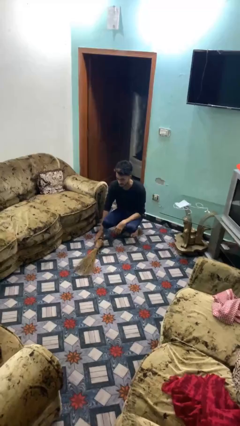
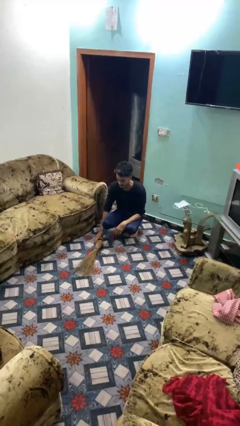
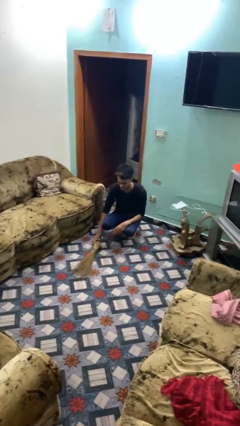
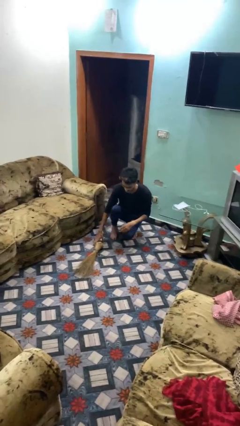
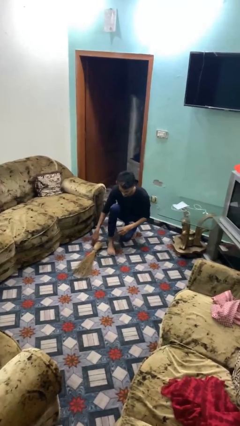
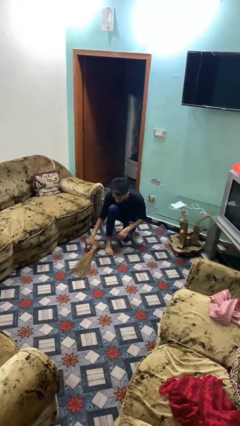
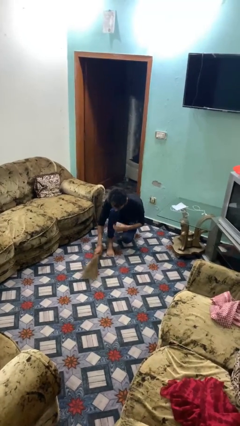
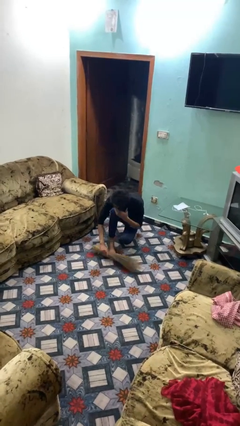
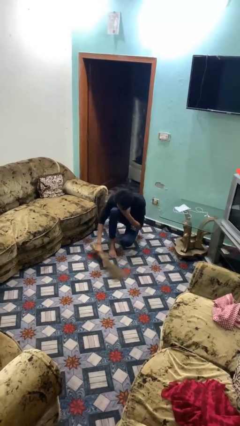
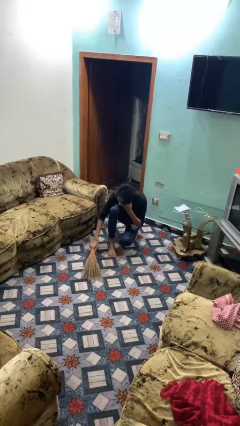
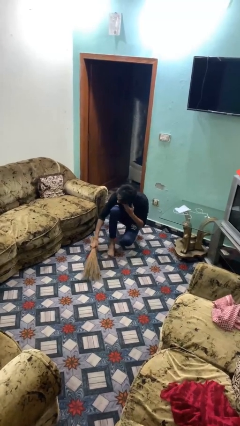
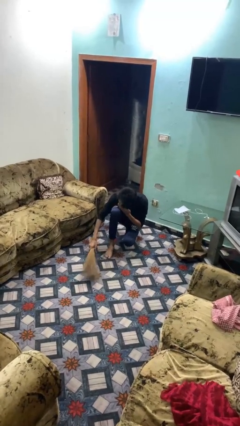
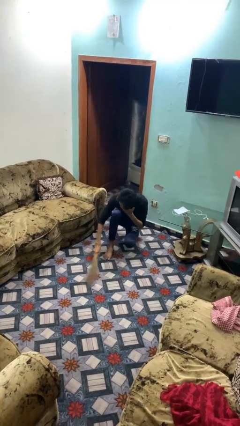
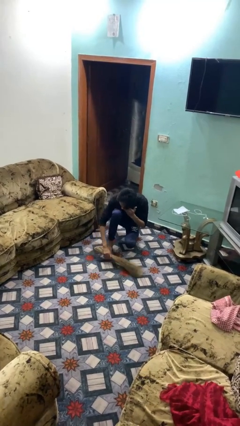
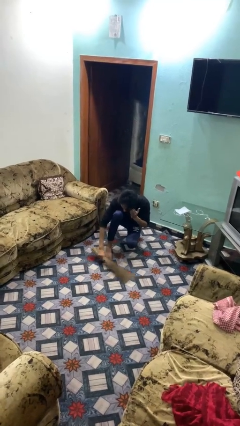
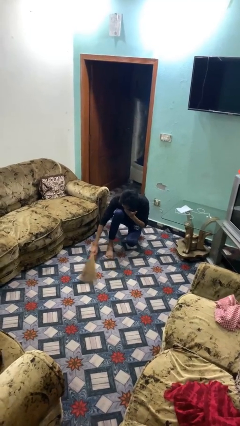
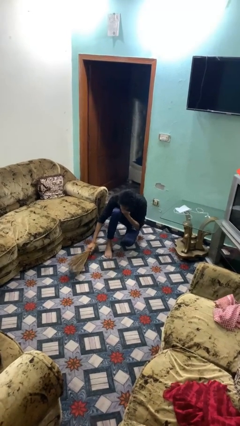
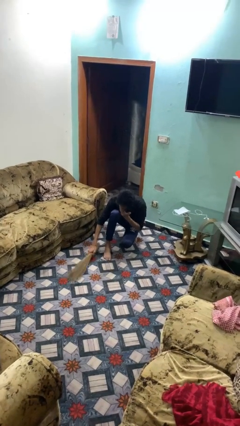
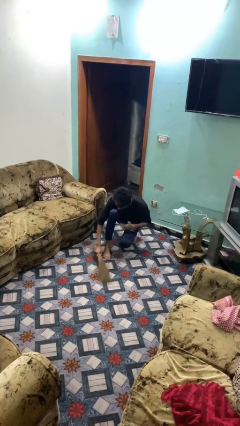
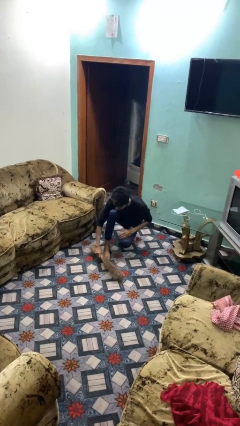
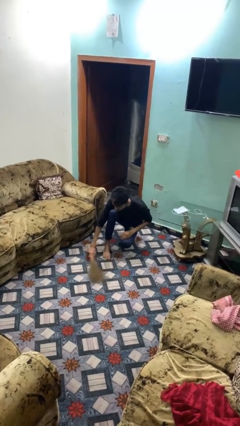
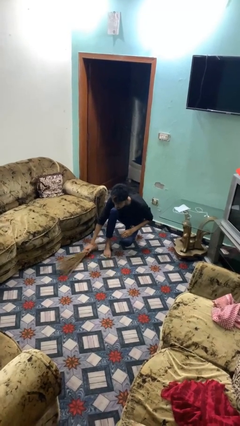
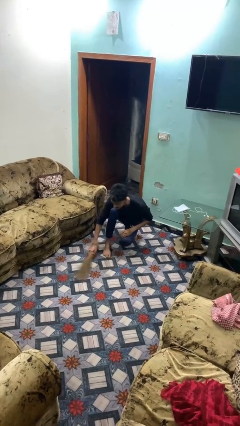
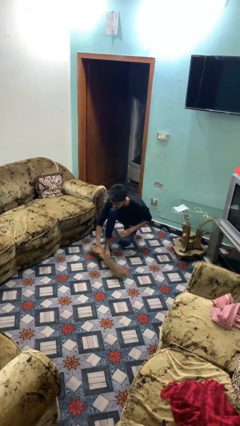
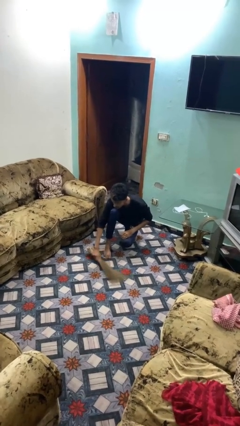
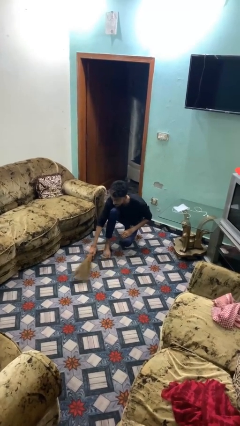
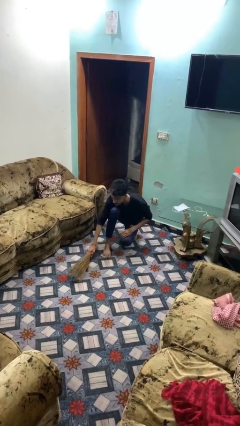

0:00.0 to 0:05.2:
person sweeps floor

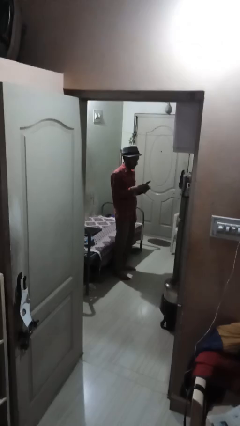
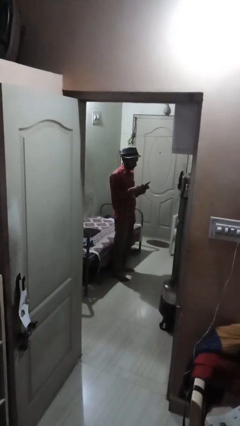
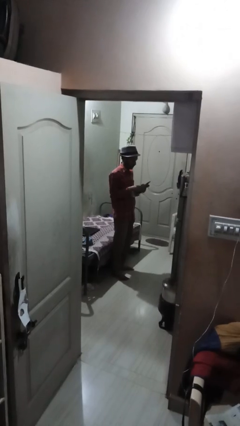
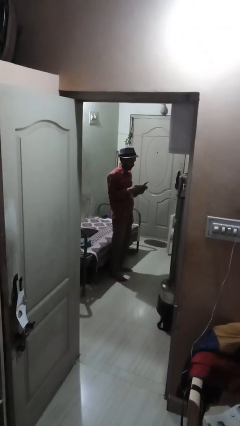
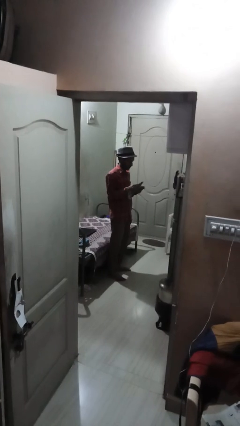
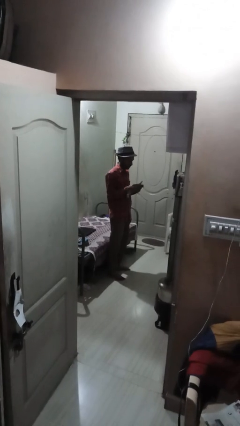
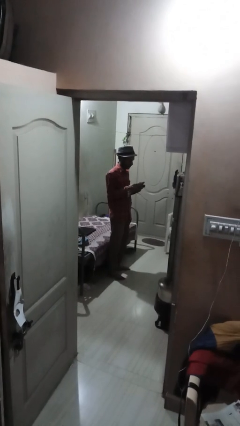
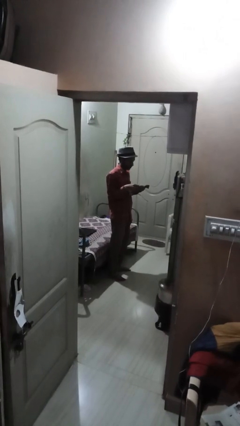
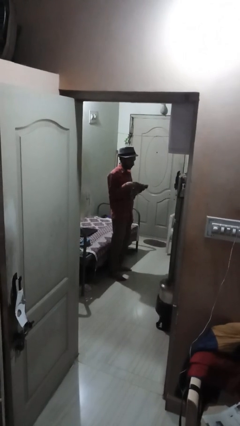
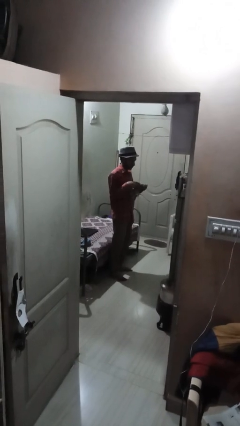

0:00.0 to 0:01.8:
person tears paper

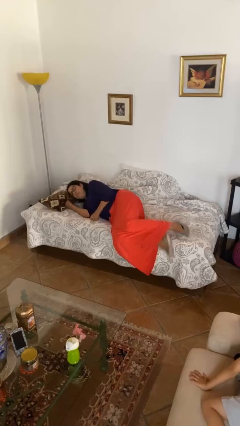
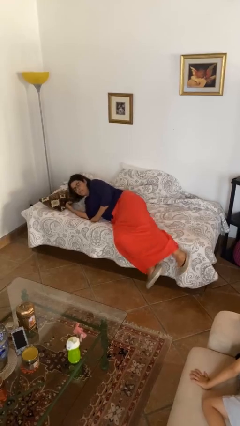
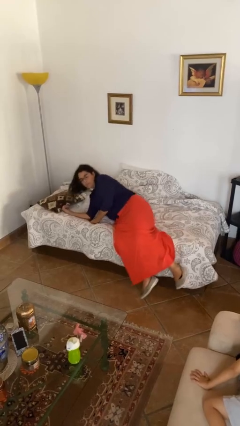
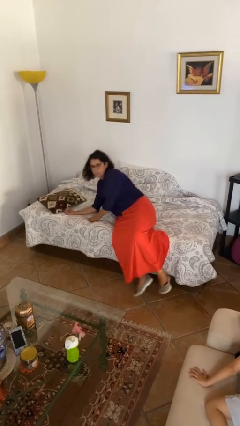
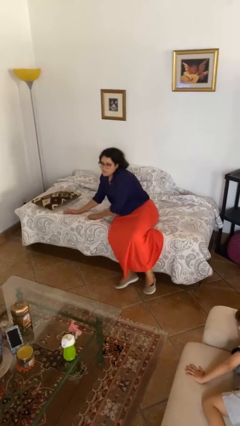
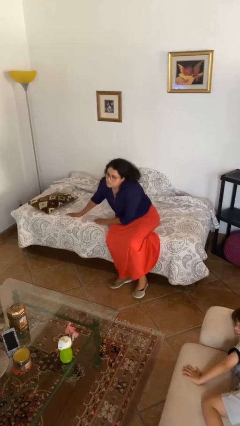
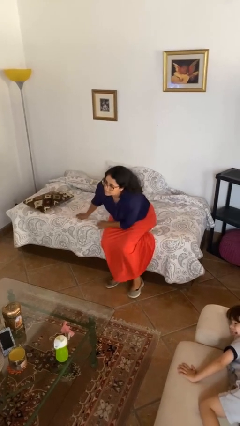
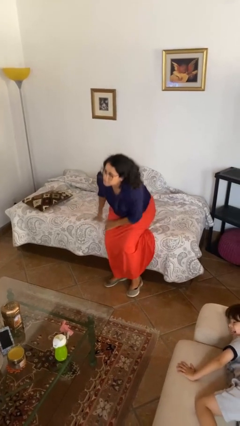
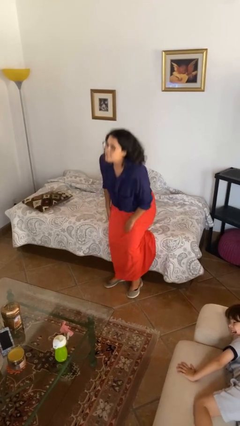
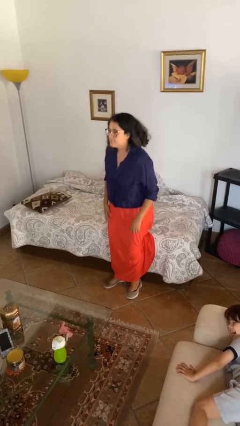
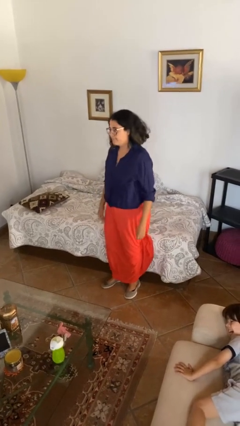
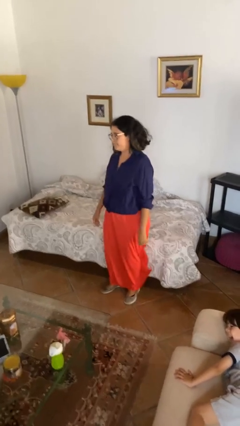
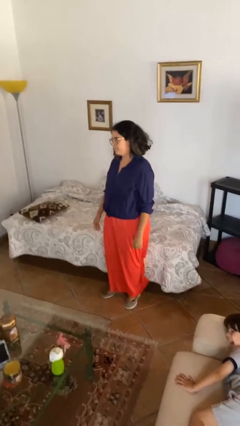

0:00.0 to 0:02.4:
person stands up

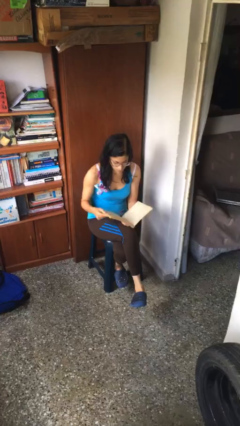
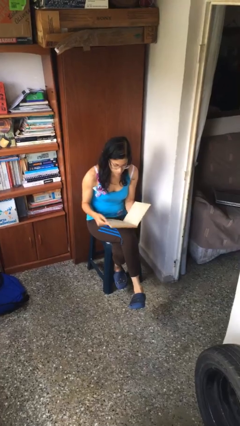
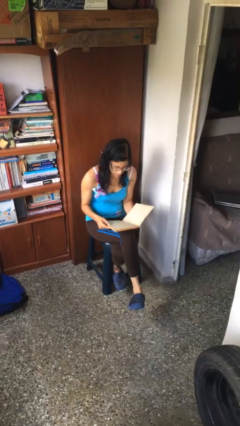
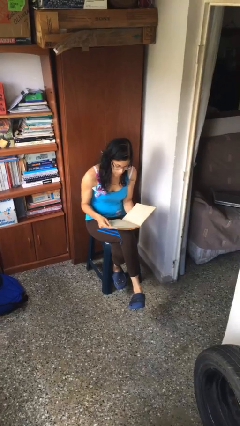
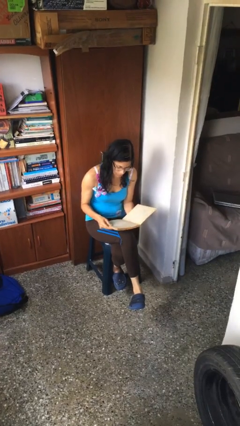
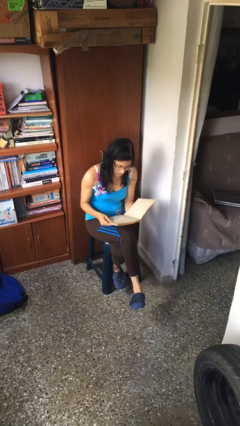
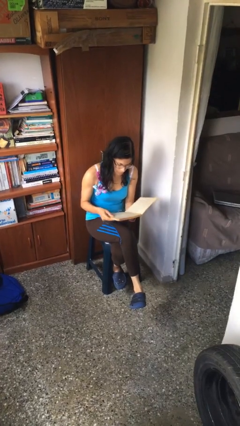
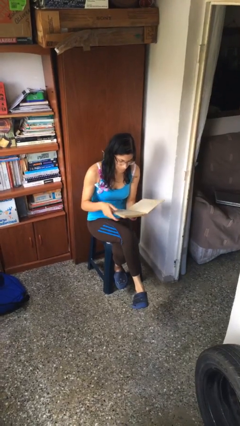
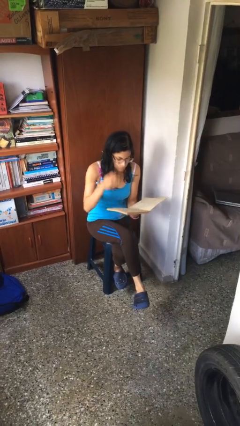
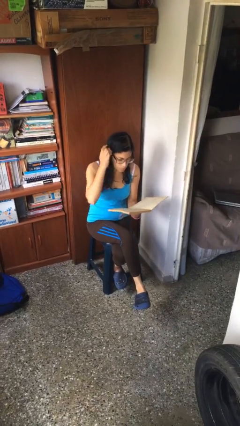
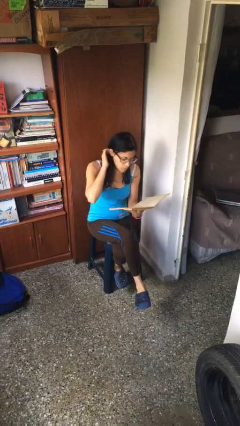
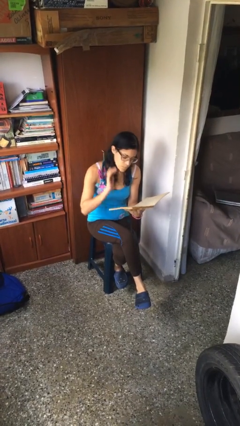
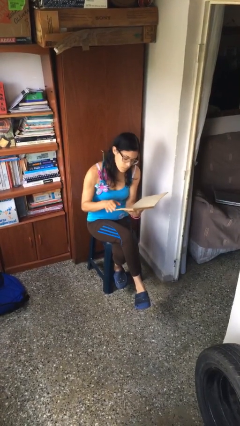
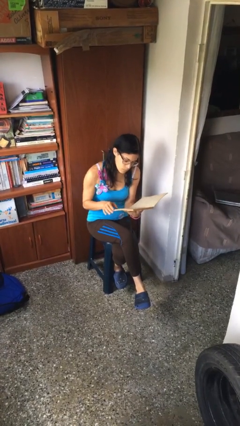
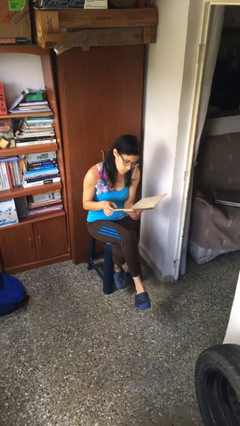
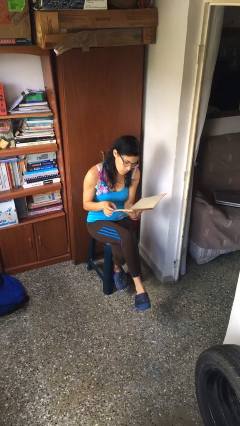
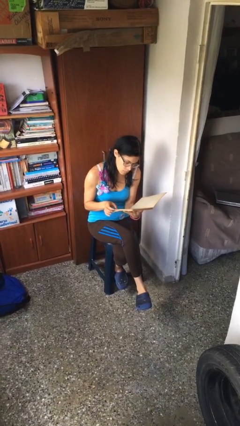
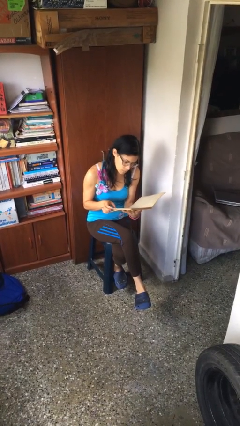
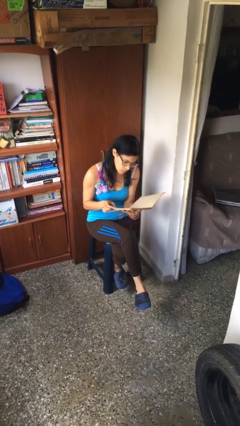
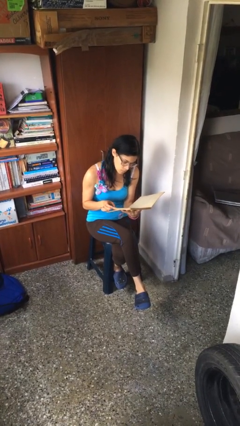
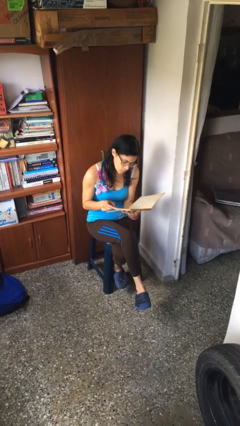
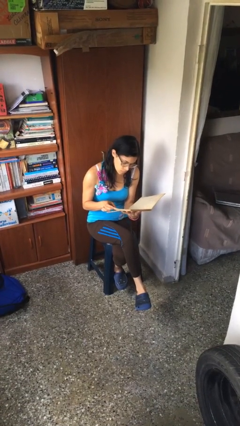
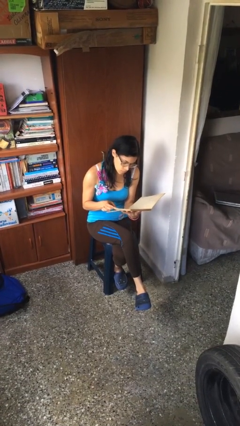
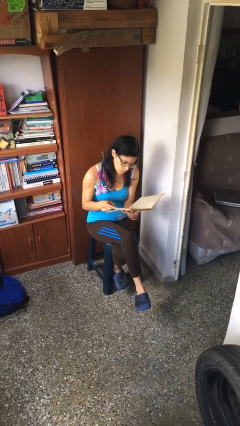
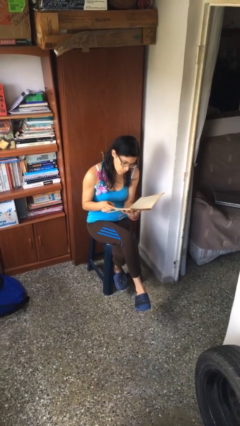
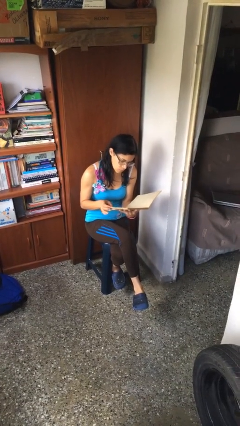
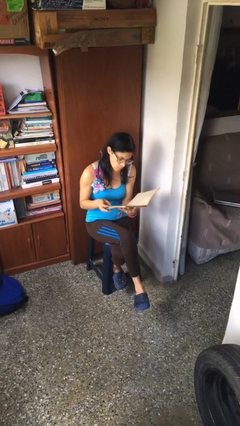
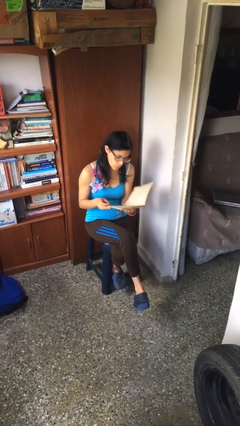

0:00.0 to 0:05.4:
person reads document

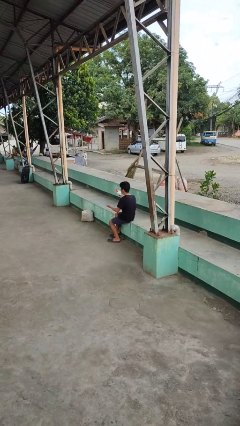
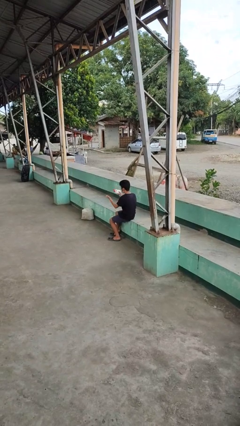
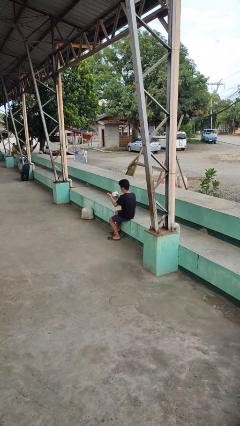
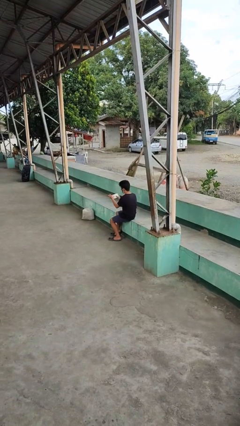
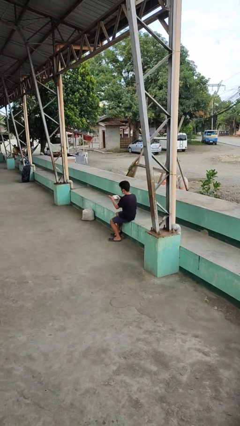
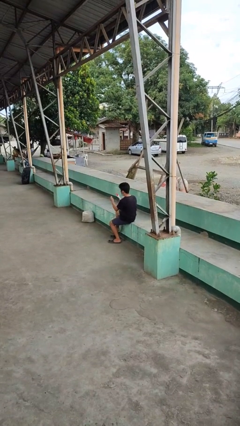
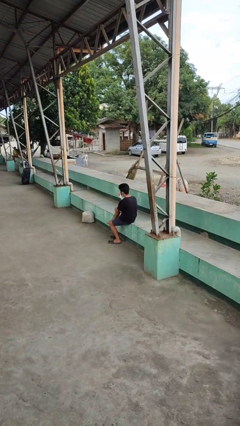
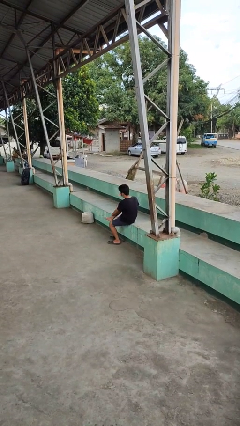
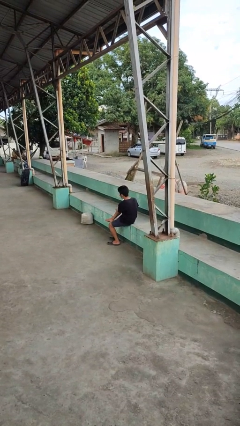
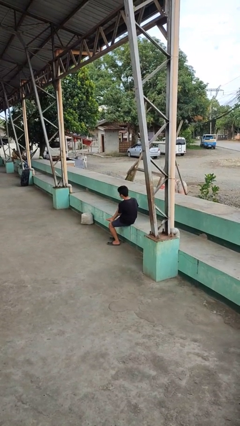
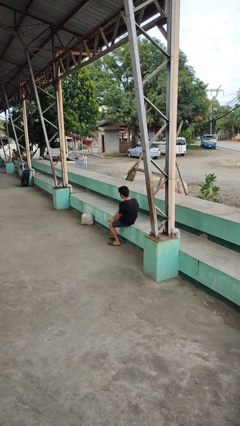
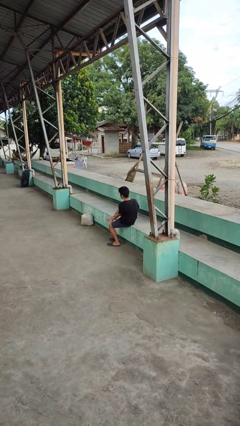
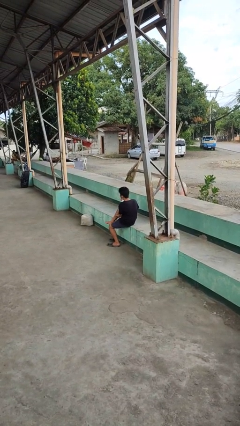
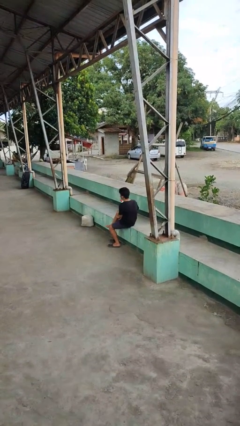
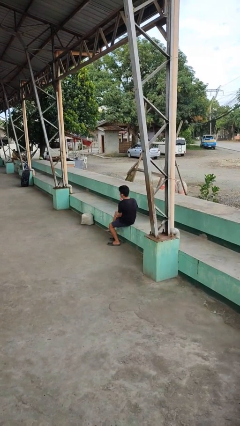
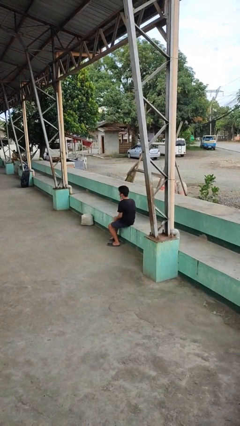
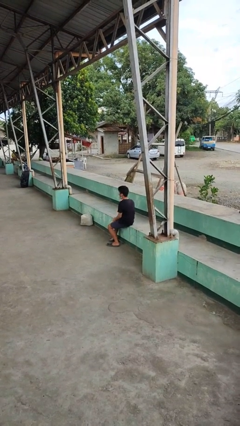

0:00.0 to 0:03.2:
person applies sunscreen
